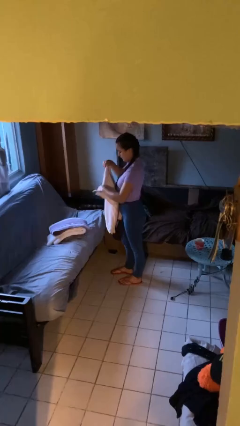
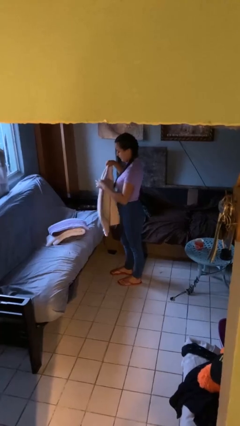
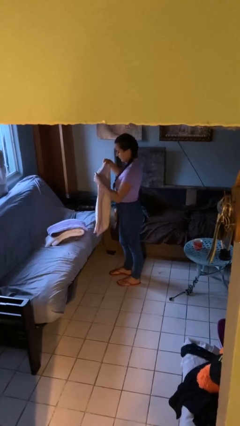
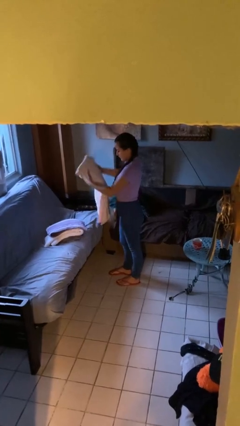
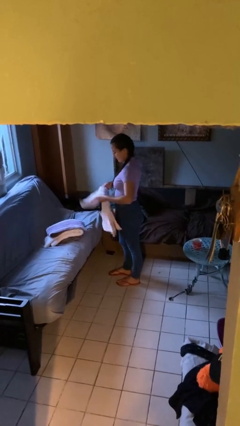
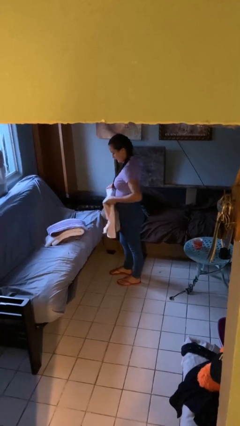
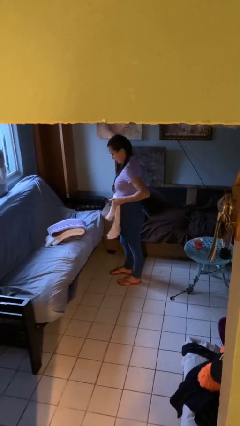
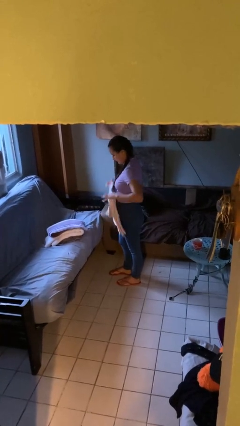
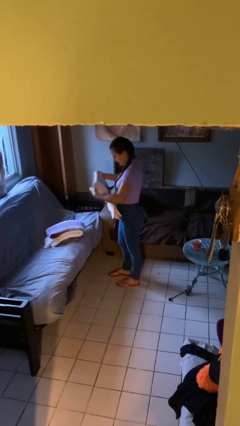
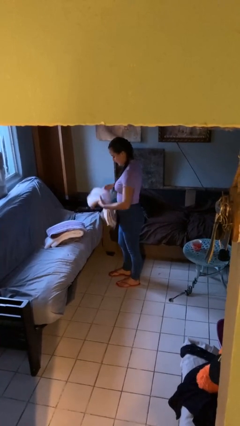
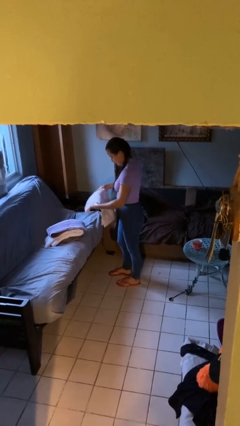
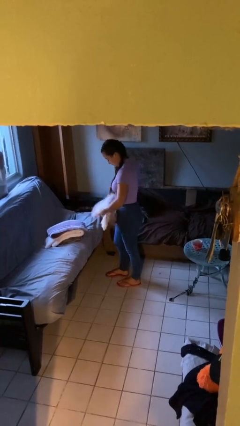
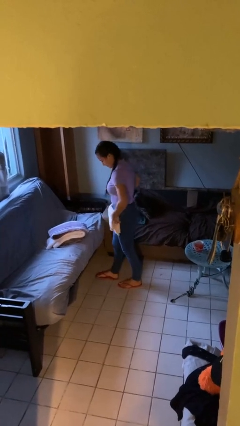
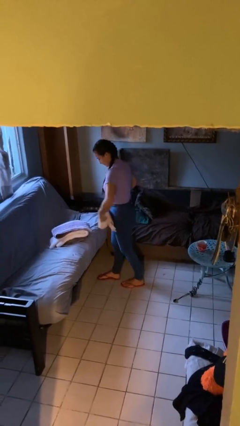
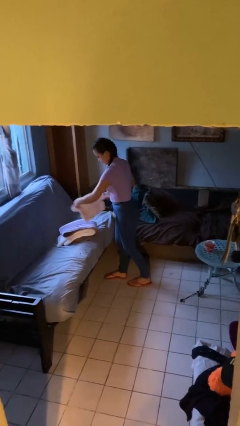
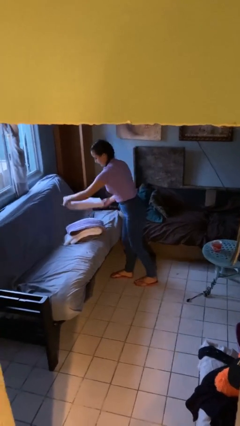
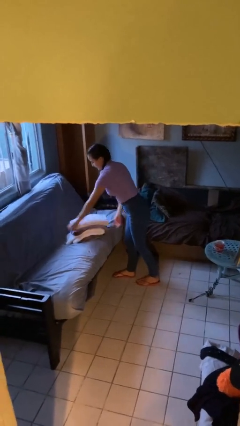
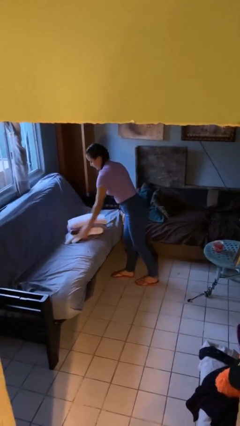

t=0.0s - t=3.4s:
person folds towel

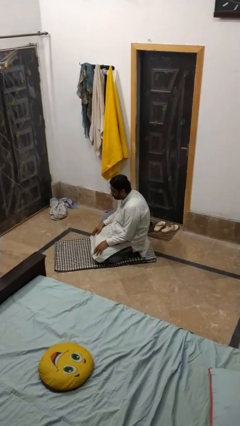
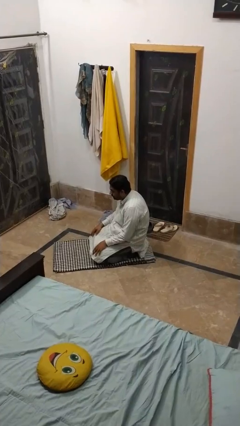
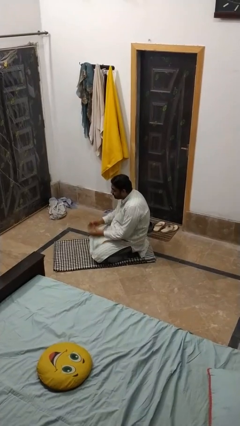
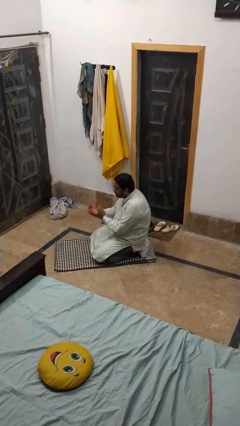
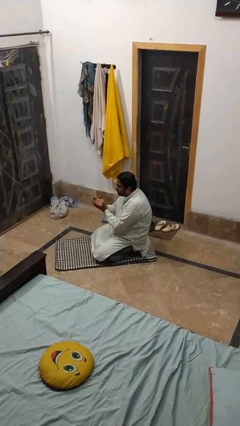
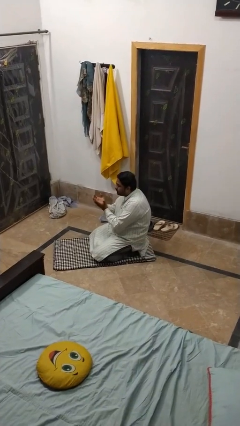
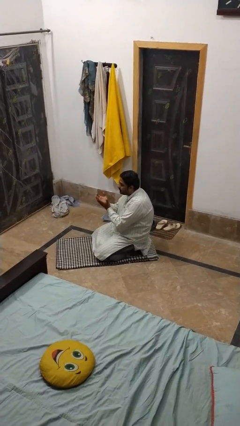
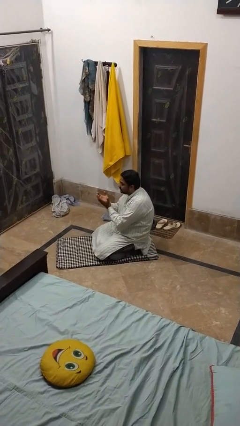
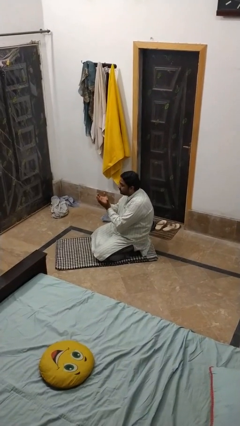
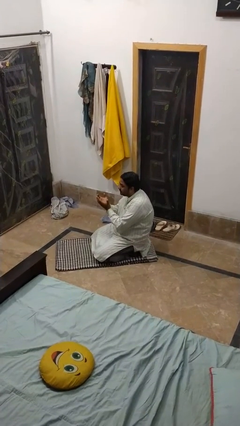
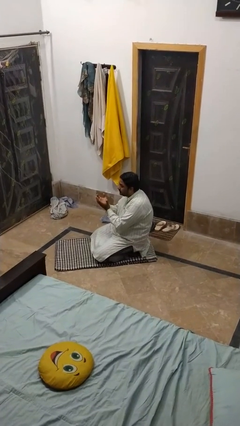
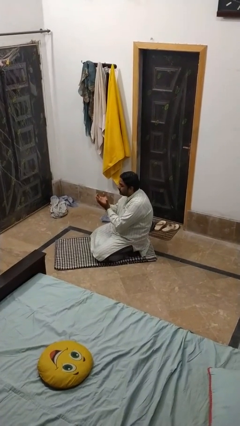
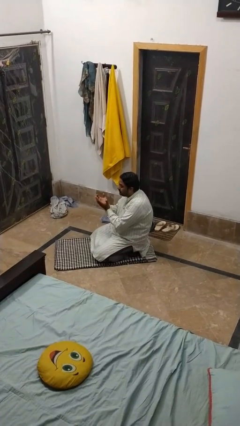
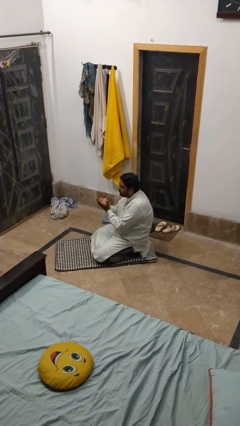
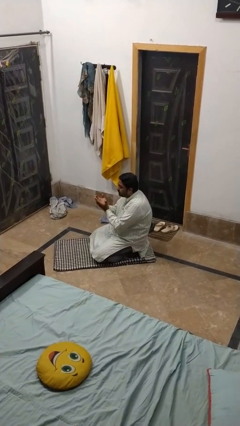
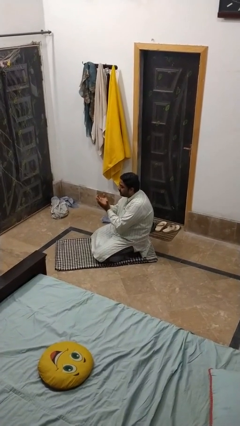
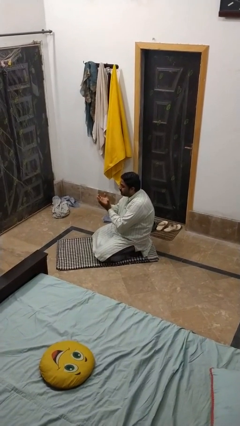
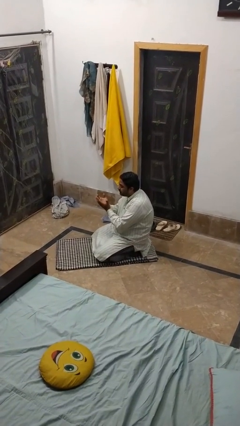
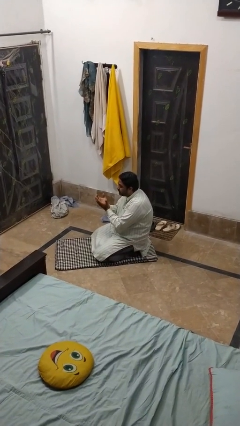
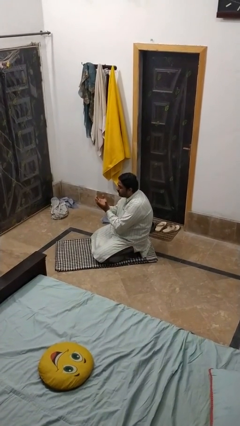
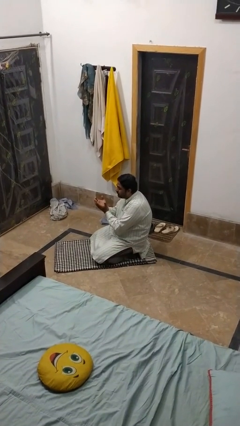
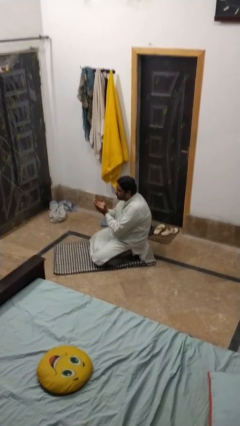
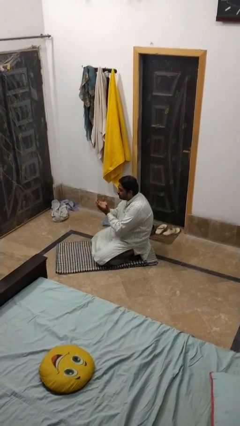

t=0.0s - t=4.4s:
person prays

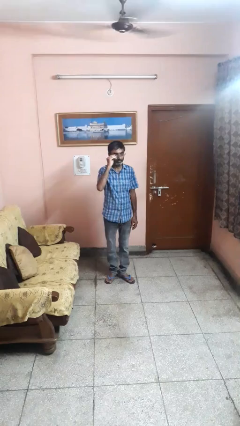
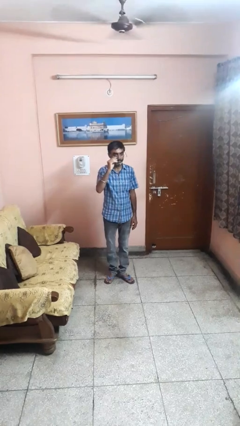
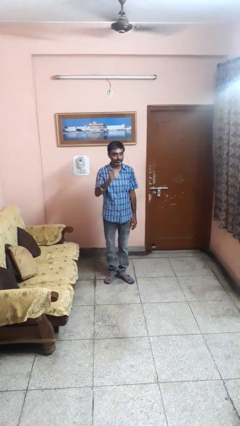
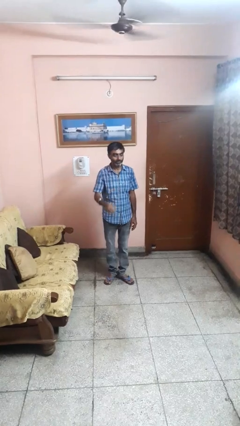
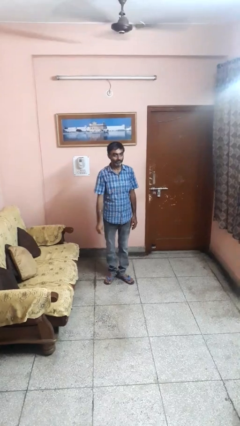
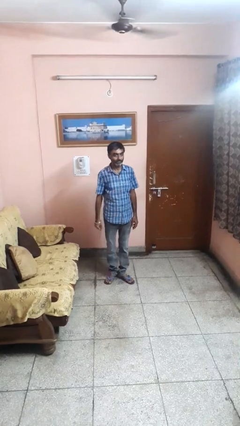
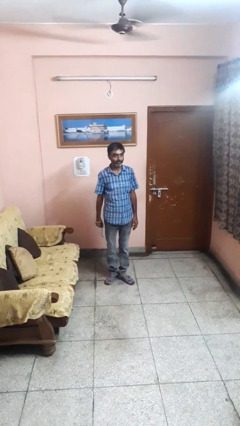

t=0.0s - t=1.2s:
person takes off glasses

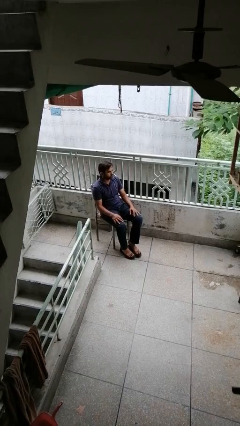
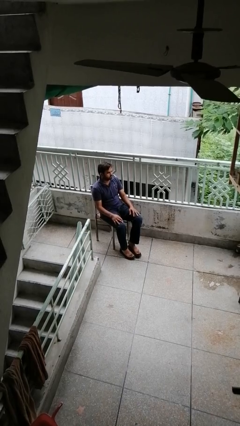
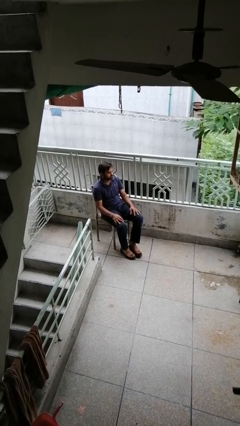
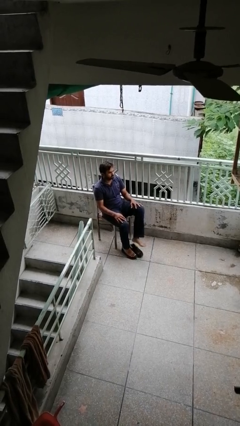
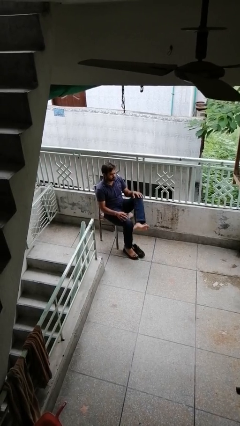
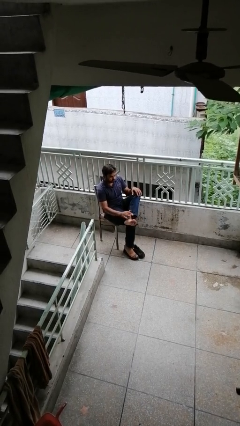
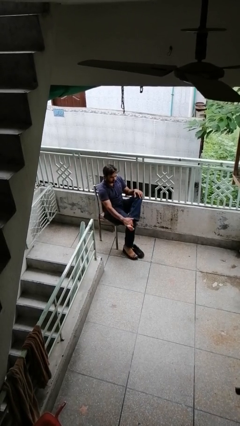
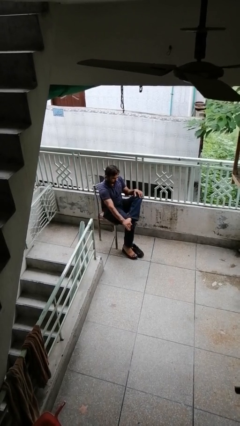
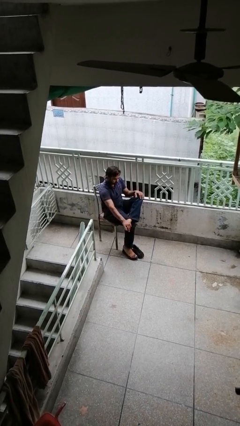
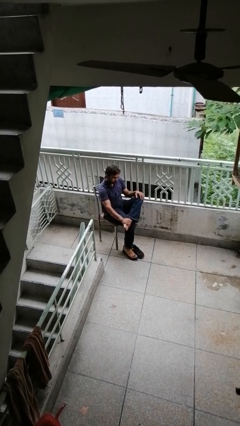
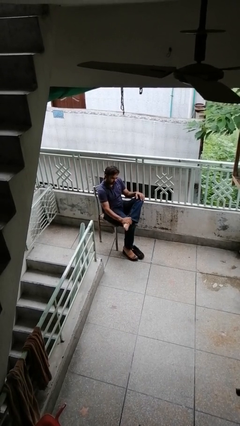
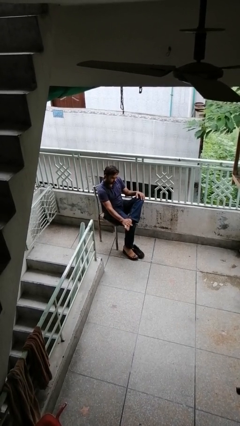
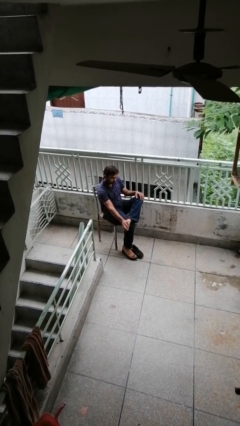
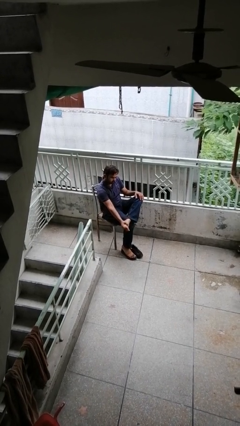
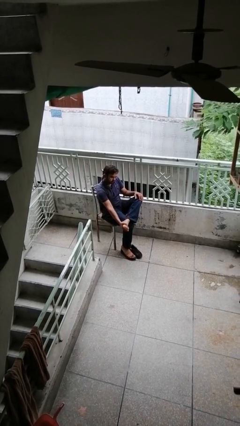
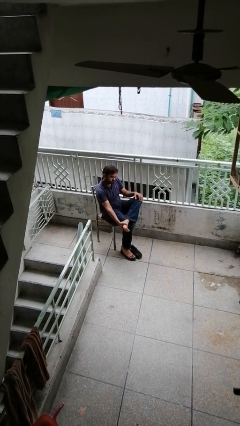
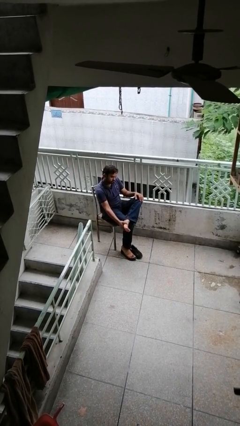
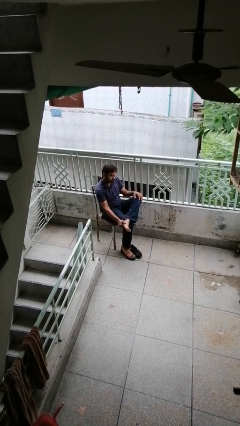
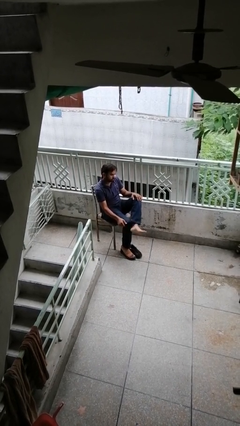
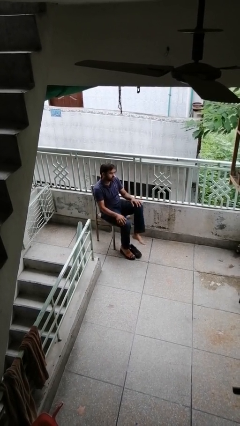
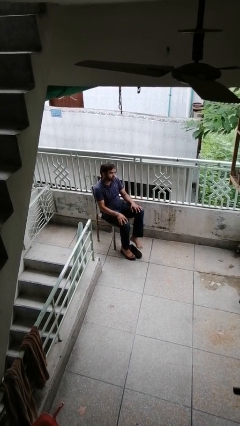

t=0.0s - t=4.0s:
person rubs foot

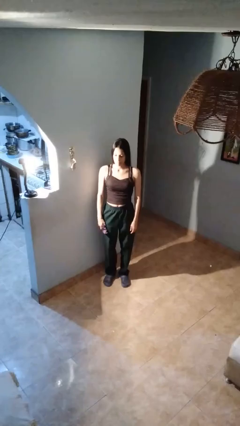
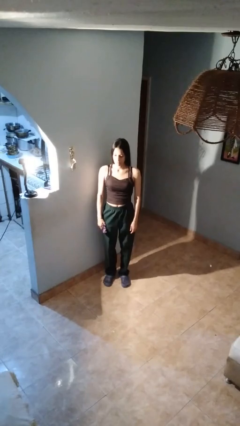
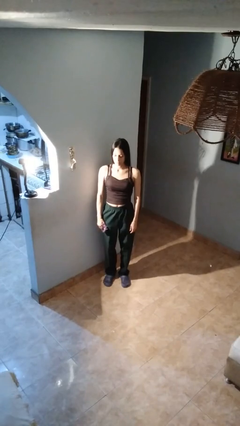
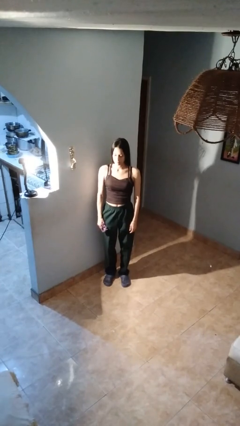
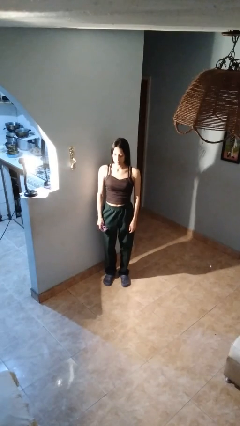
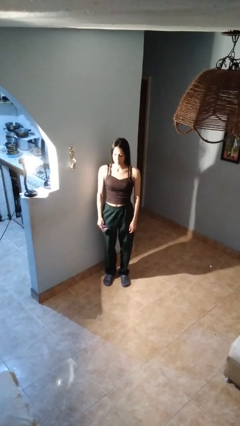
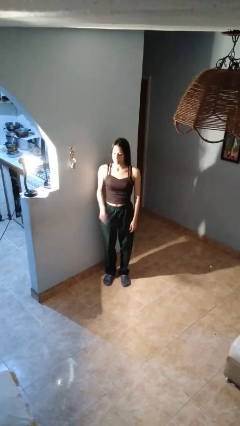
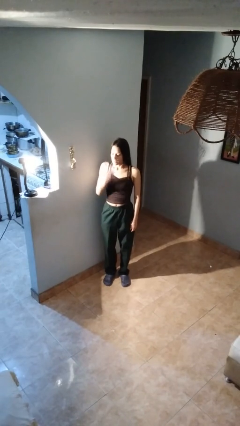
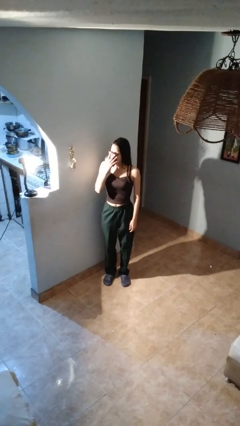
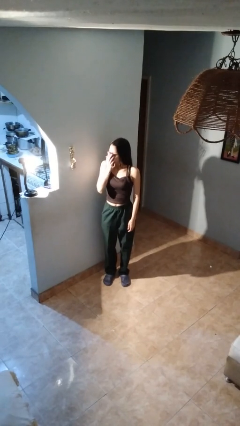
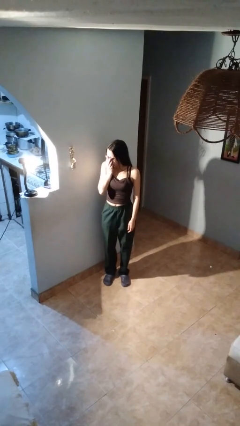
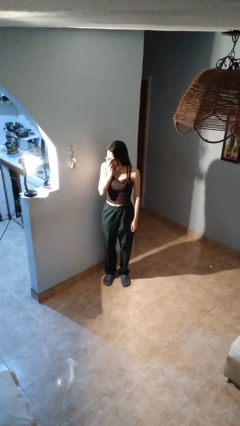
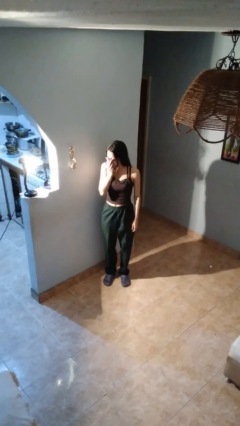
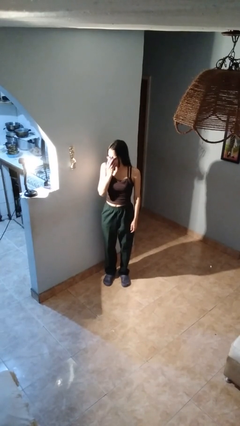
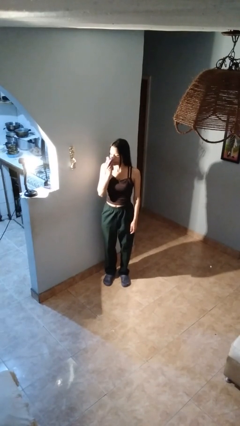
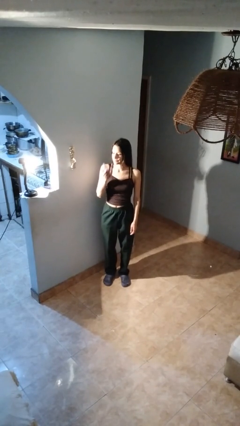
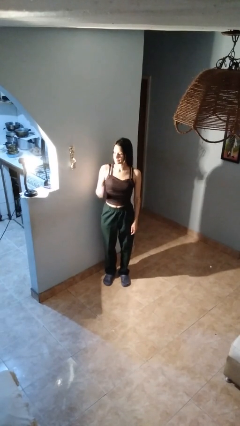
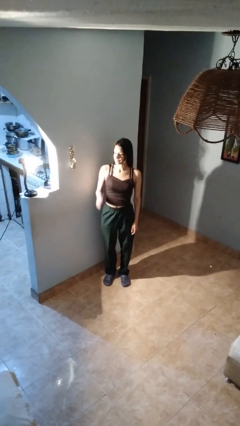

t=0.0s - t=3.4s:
person blows nose

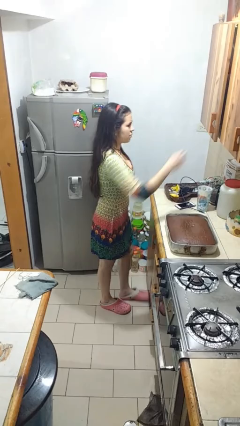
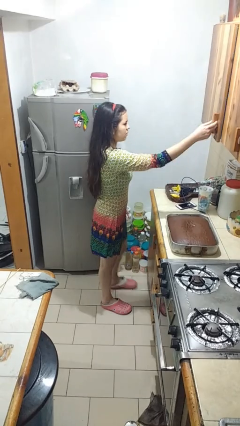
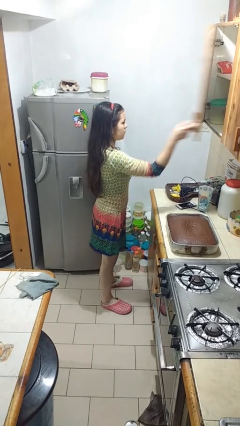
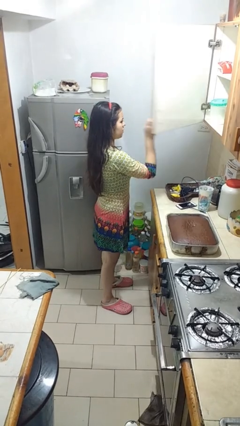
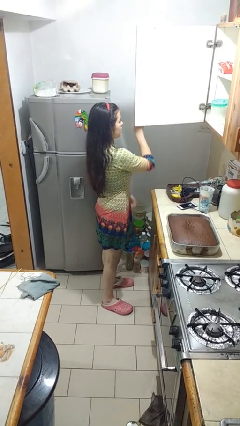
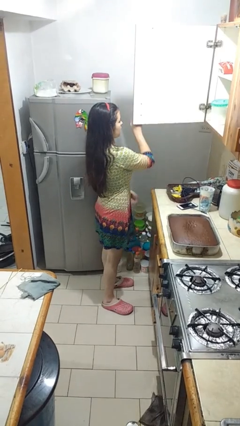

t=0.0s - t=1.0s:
person opens cabinet
